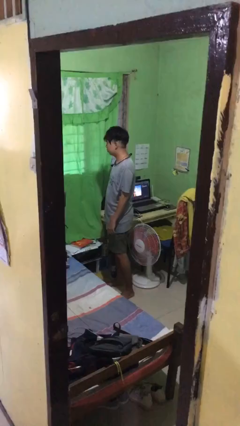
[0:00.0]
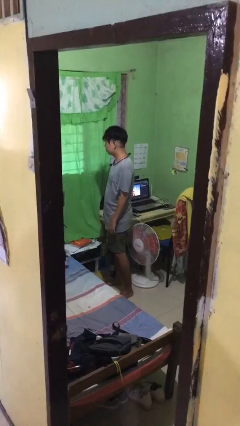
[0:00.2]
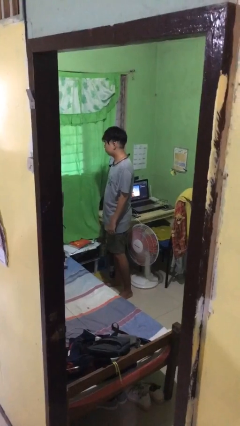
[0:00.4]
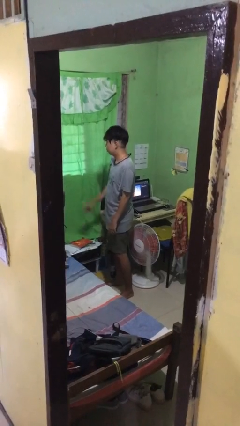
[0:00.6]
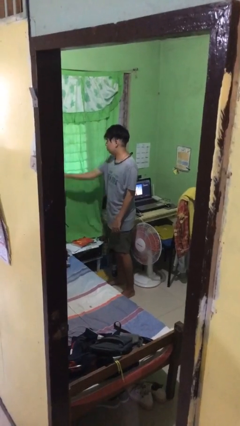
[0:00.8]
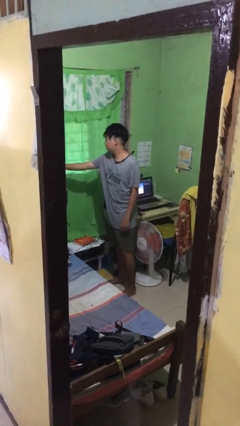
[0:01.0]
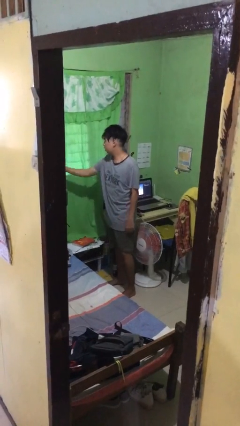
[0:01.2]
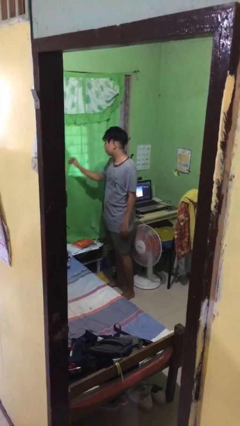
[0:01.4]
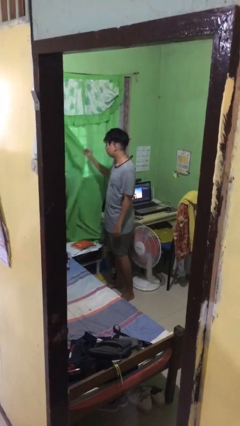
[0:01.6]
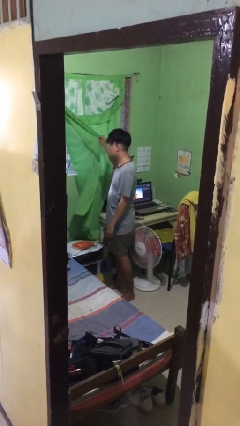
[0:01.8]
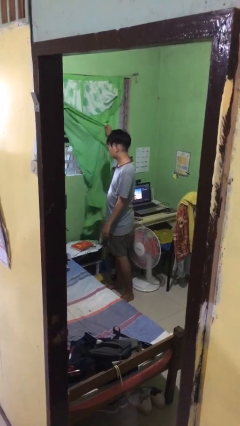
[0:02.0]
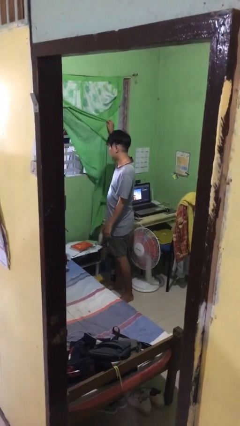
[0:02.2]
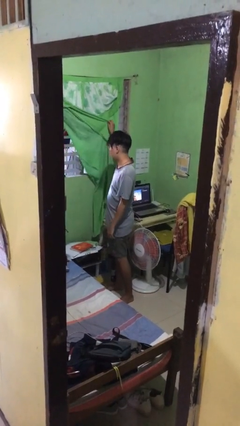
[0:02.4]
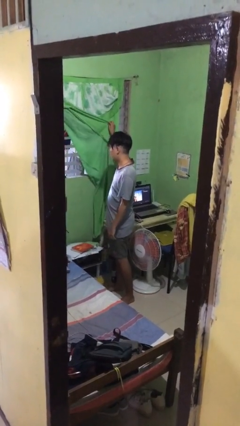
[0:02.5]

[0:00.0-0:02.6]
person opens curtains

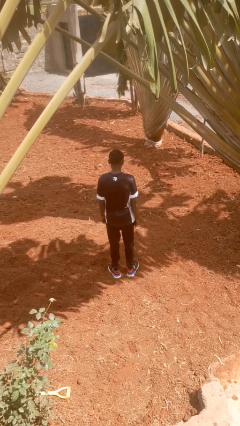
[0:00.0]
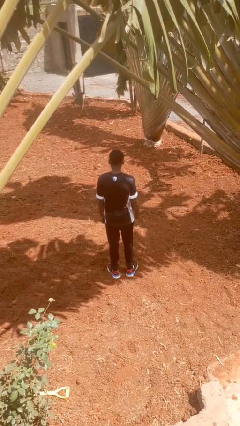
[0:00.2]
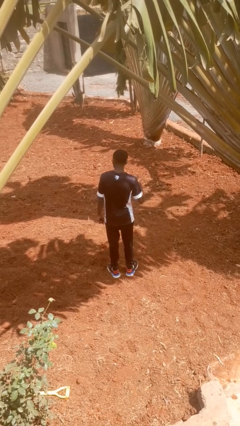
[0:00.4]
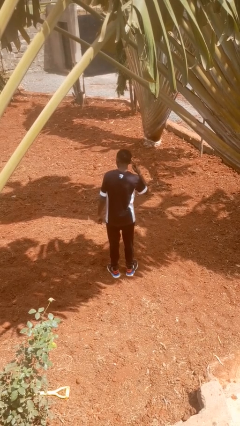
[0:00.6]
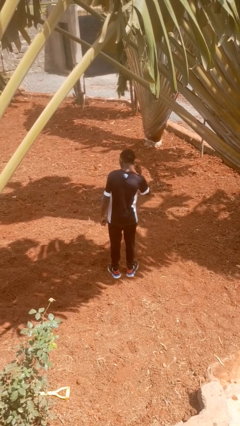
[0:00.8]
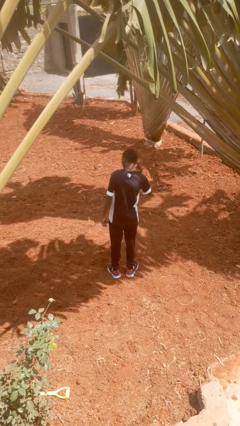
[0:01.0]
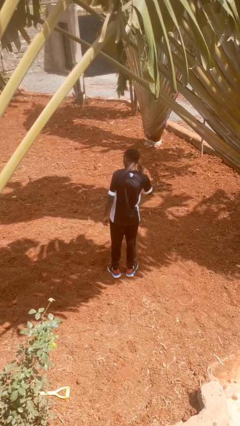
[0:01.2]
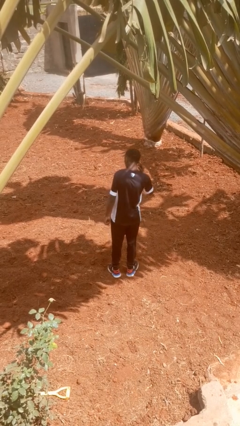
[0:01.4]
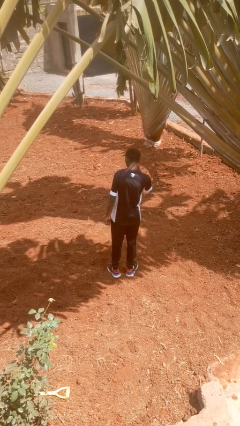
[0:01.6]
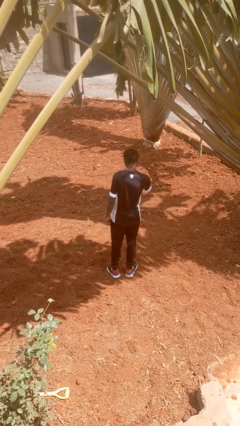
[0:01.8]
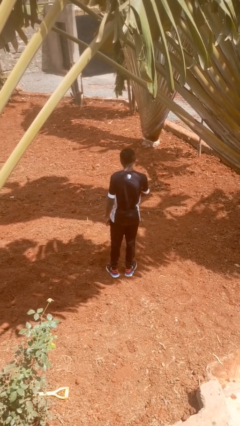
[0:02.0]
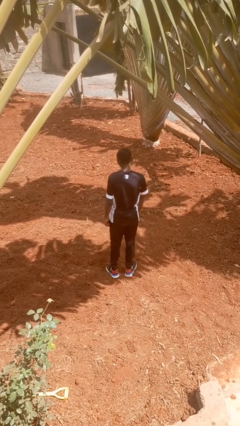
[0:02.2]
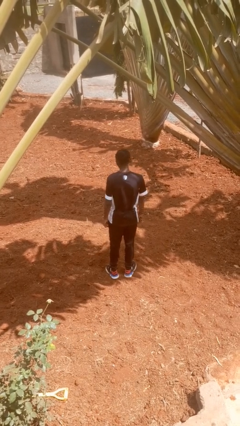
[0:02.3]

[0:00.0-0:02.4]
person gestures listen closely

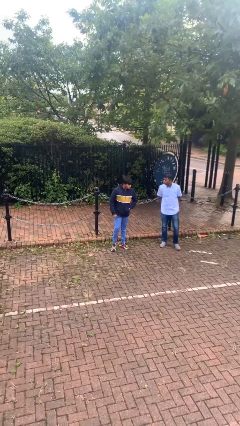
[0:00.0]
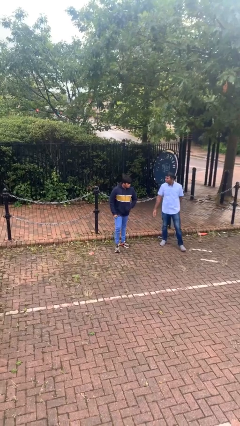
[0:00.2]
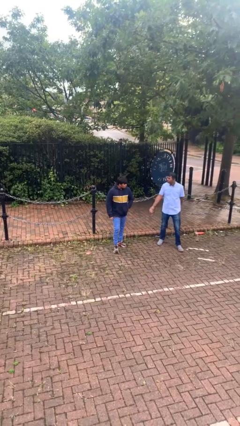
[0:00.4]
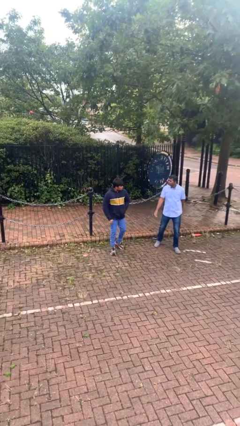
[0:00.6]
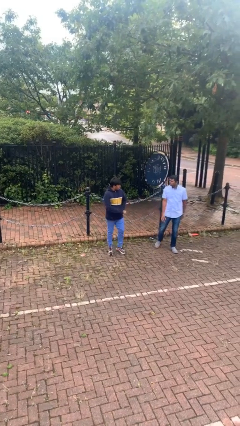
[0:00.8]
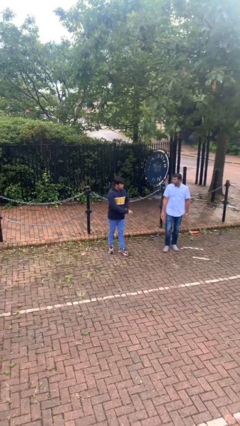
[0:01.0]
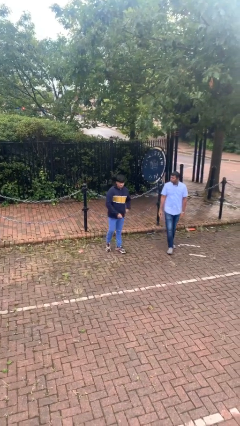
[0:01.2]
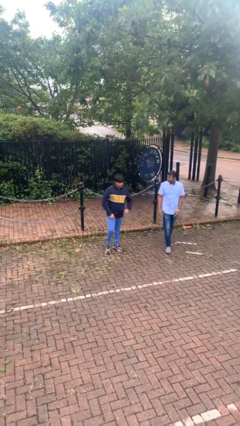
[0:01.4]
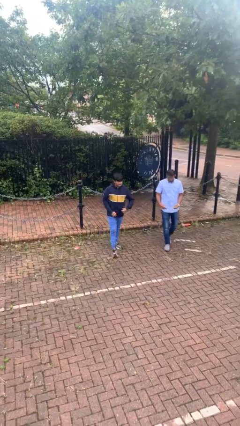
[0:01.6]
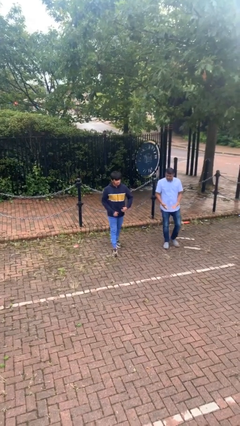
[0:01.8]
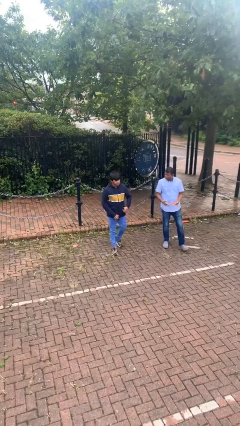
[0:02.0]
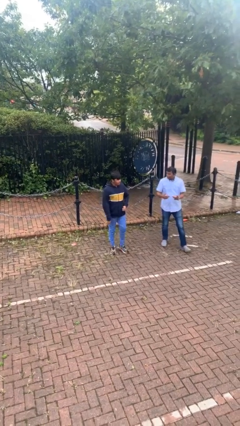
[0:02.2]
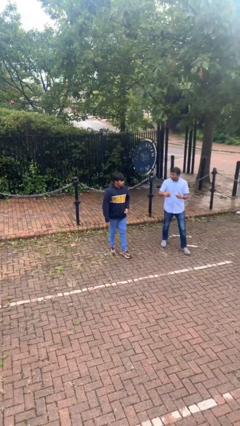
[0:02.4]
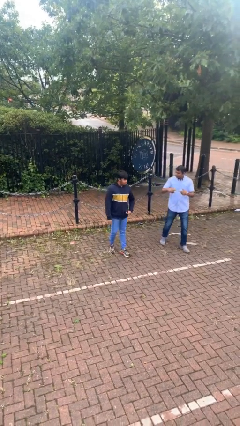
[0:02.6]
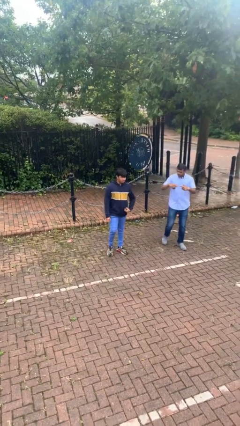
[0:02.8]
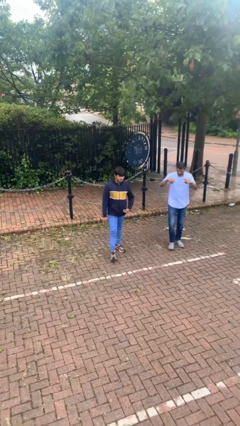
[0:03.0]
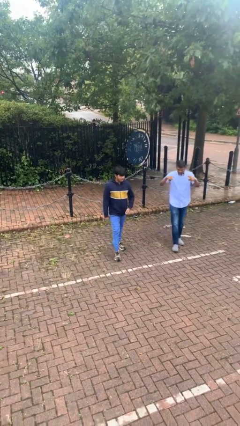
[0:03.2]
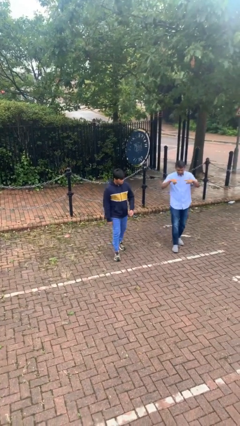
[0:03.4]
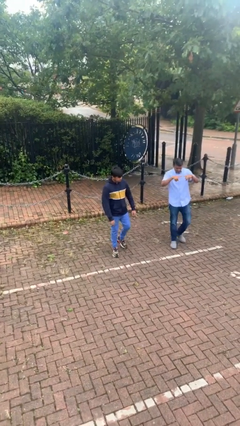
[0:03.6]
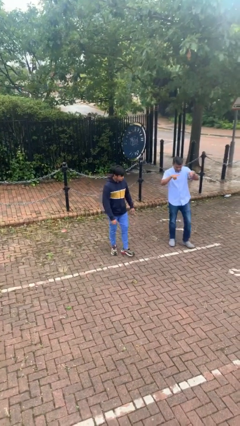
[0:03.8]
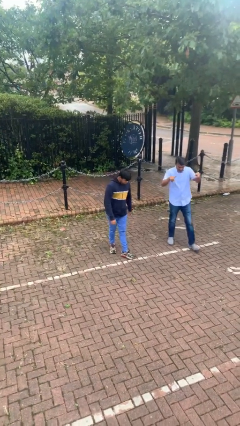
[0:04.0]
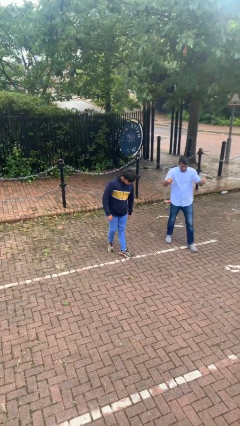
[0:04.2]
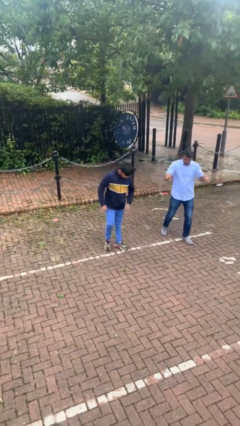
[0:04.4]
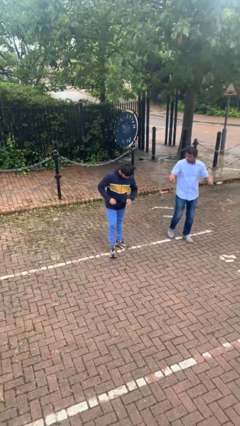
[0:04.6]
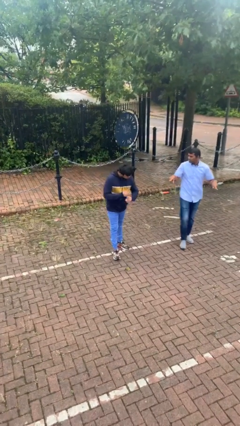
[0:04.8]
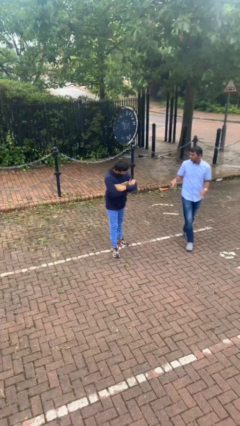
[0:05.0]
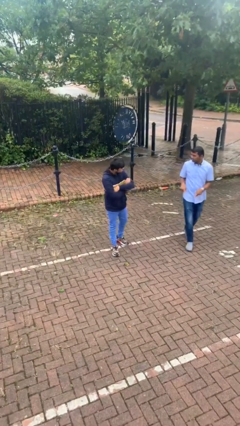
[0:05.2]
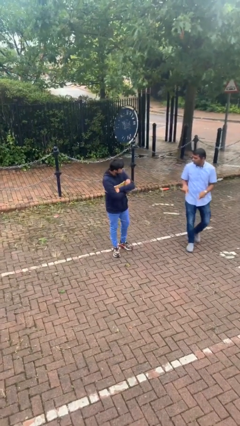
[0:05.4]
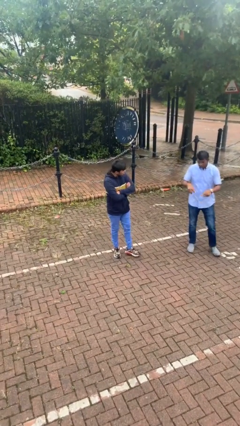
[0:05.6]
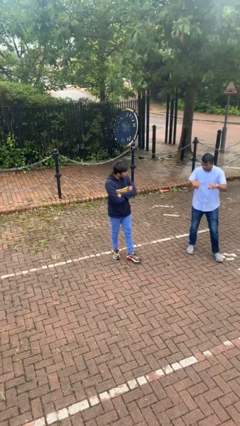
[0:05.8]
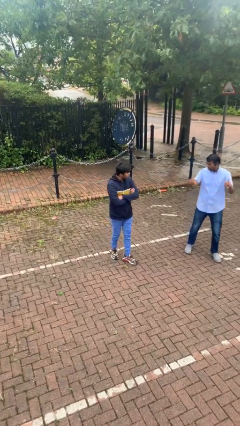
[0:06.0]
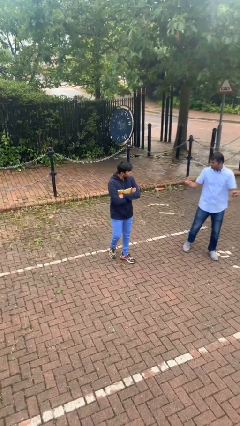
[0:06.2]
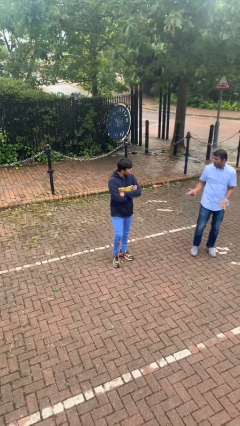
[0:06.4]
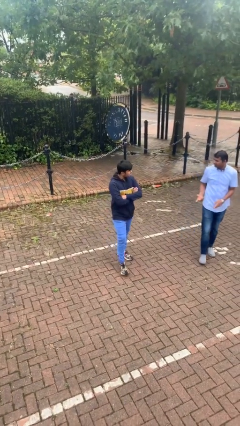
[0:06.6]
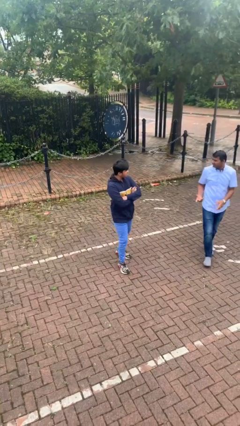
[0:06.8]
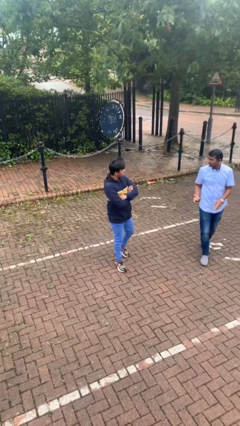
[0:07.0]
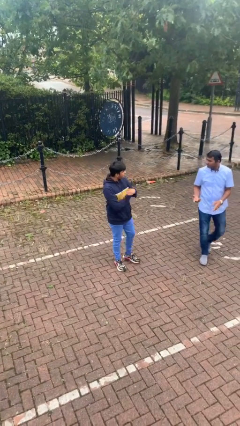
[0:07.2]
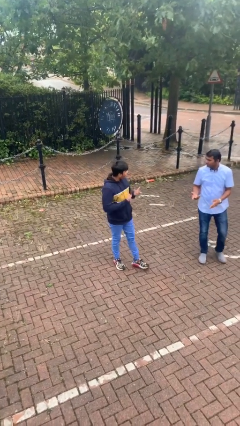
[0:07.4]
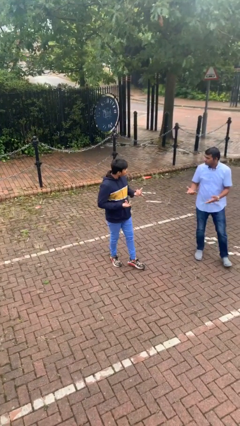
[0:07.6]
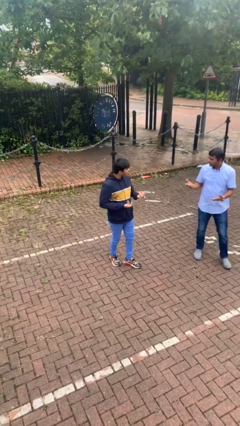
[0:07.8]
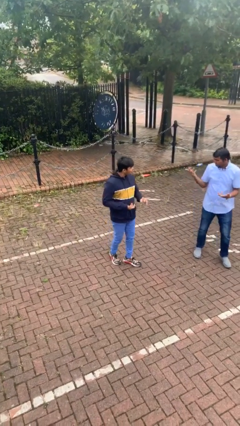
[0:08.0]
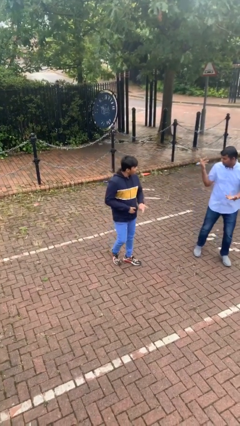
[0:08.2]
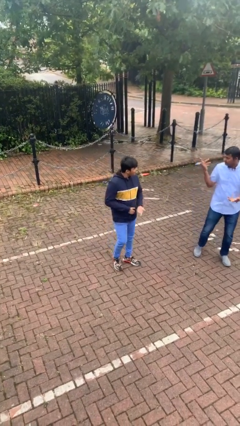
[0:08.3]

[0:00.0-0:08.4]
person talks to person

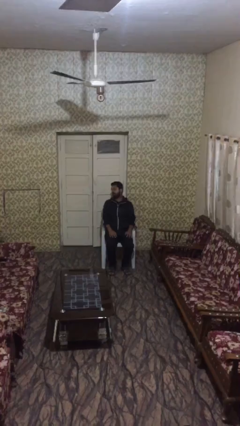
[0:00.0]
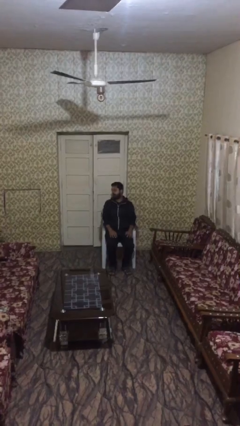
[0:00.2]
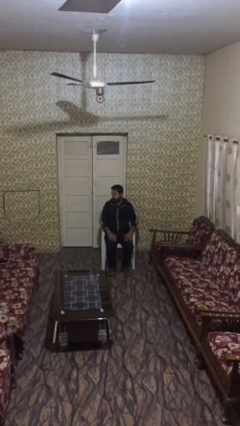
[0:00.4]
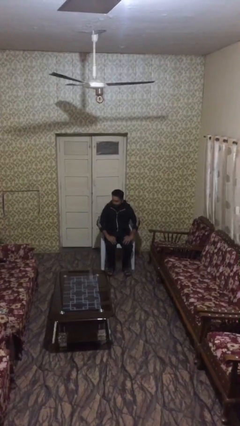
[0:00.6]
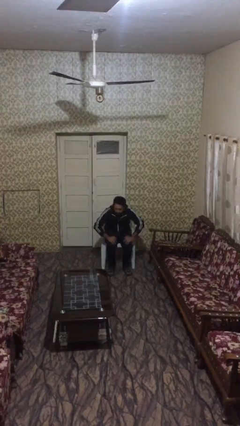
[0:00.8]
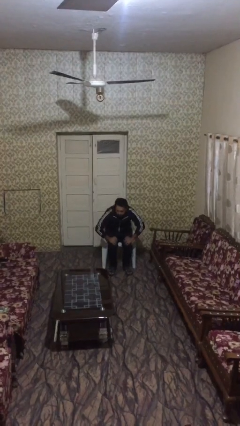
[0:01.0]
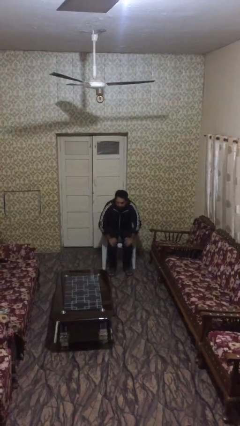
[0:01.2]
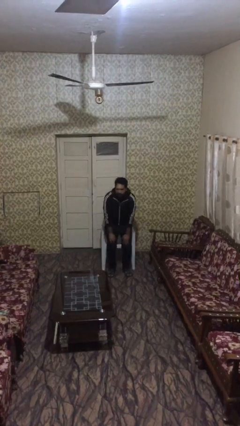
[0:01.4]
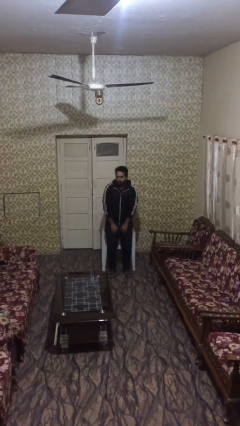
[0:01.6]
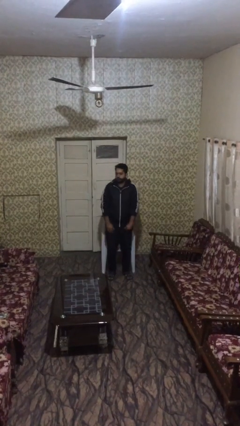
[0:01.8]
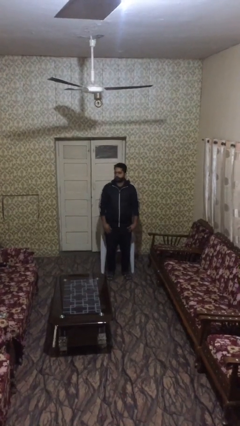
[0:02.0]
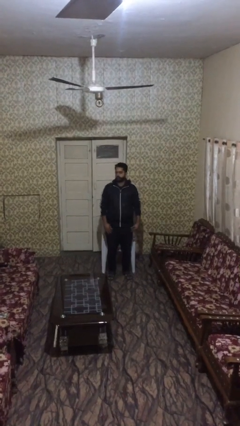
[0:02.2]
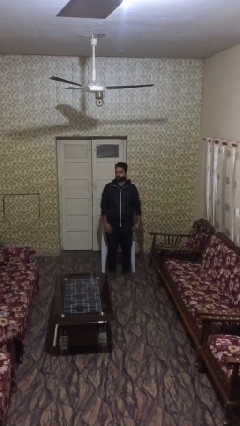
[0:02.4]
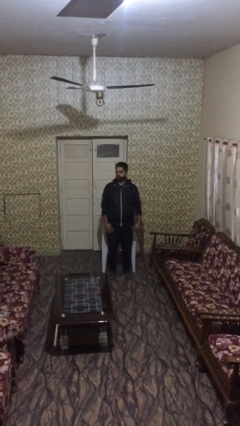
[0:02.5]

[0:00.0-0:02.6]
person stands up

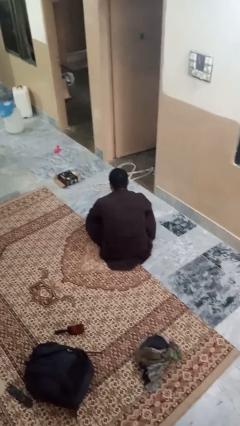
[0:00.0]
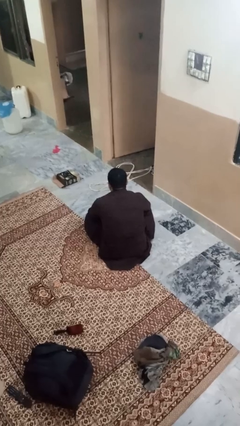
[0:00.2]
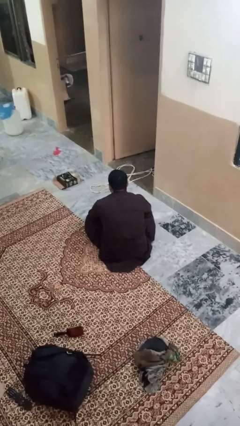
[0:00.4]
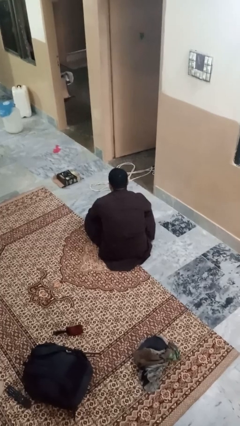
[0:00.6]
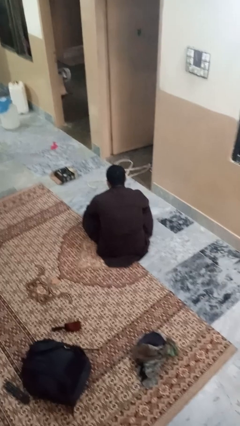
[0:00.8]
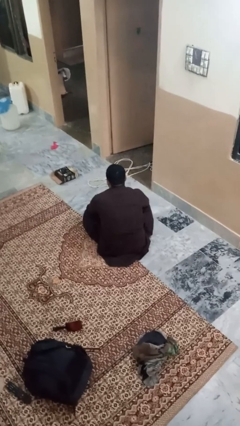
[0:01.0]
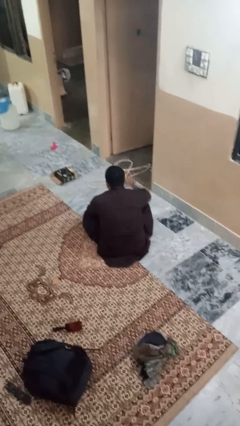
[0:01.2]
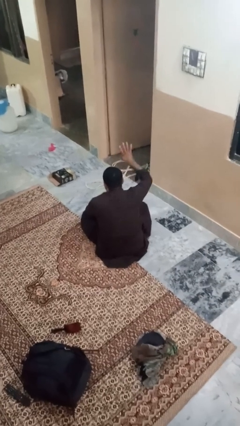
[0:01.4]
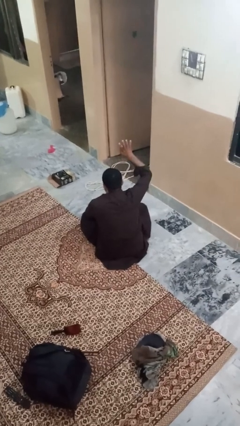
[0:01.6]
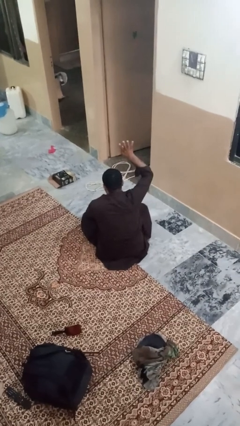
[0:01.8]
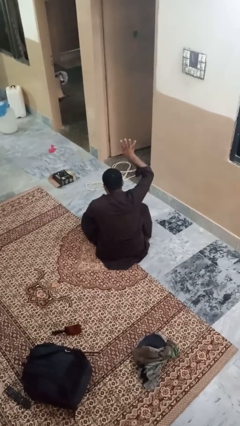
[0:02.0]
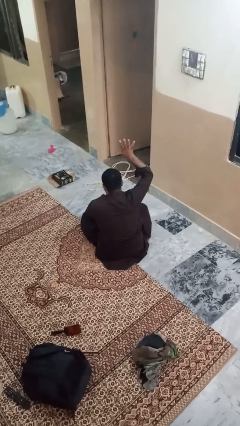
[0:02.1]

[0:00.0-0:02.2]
person gestures number four
